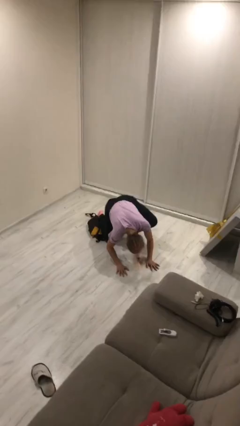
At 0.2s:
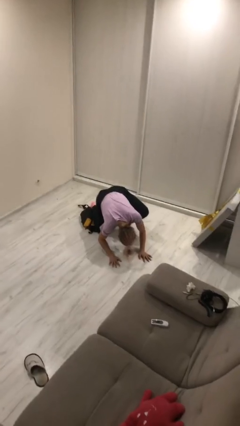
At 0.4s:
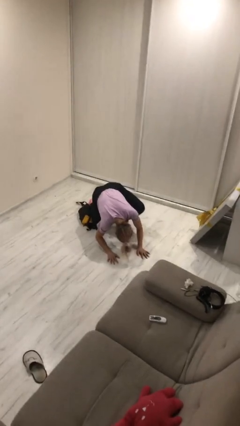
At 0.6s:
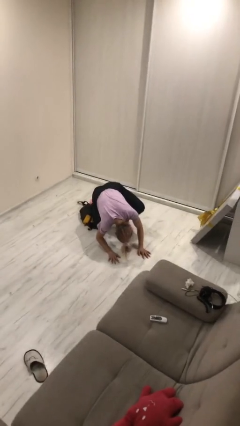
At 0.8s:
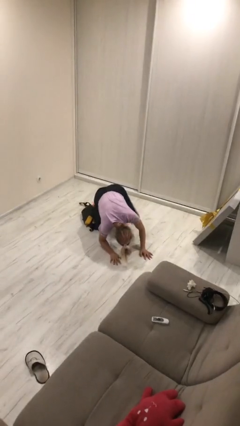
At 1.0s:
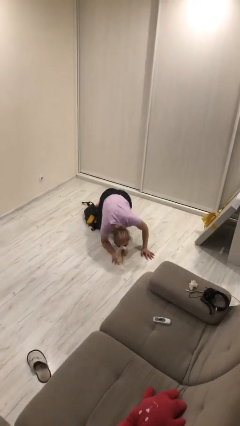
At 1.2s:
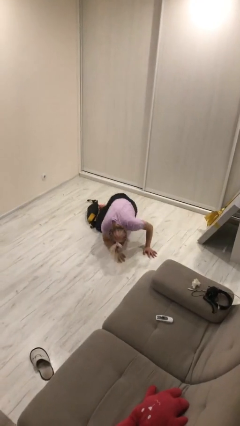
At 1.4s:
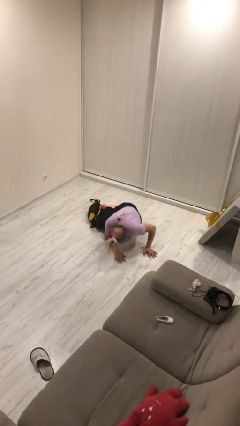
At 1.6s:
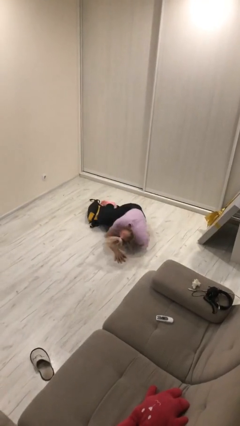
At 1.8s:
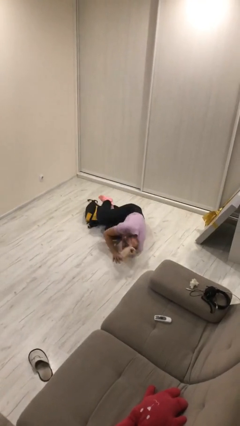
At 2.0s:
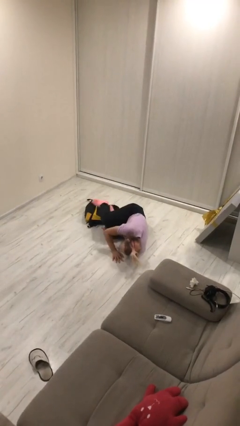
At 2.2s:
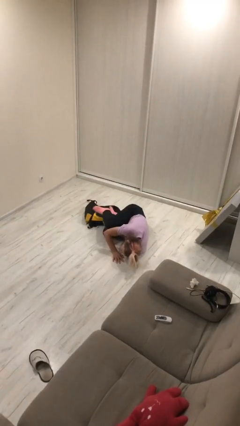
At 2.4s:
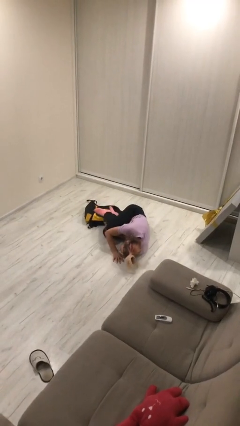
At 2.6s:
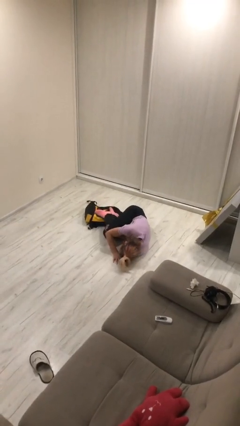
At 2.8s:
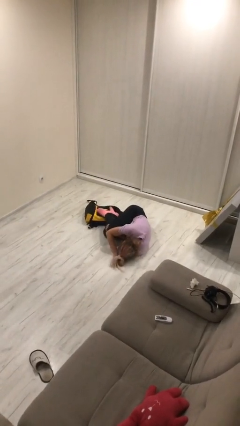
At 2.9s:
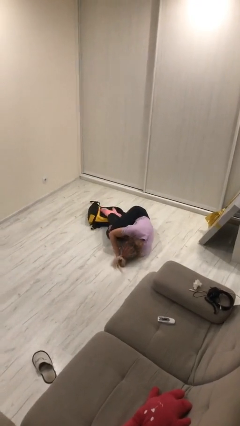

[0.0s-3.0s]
person lies down on floor

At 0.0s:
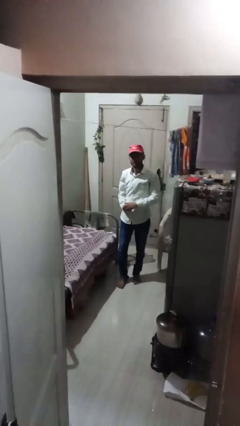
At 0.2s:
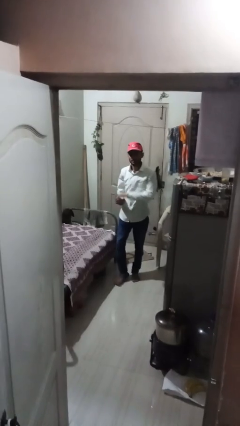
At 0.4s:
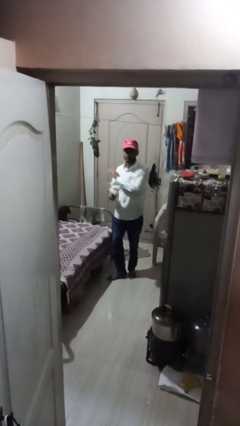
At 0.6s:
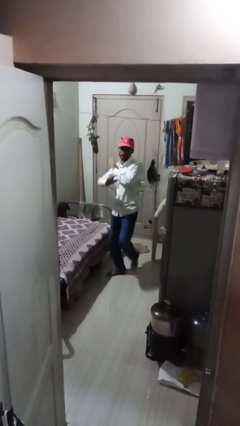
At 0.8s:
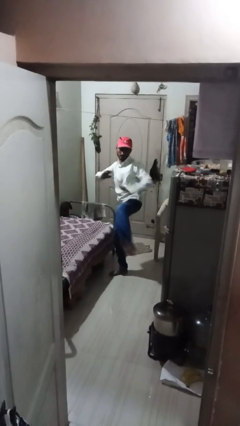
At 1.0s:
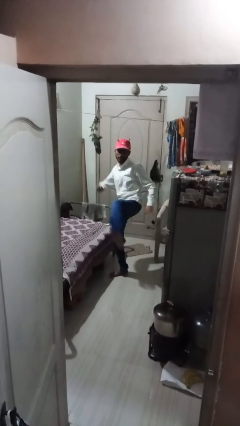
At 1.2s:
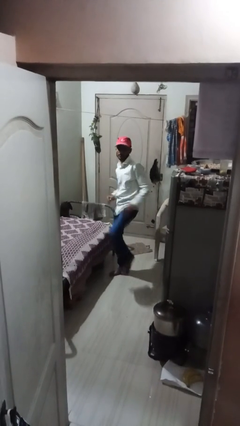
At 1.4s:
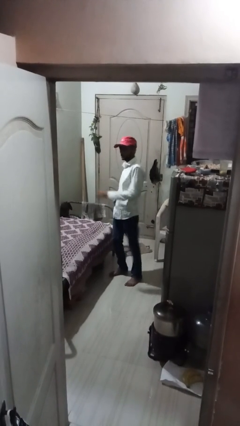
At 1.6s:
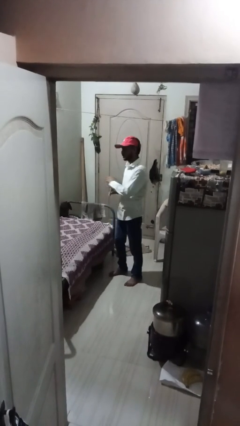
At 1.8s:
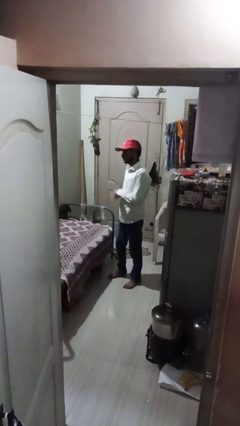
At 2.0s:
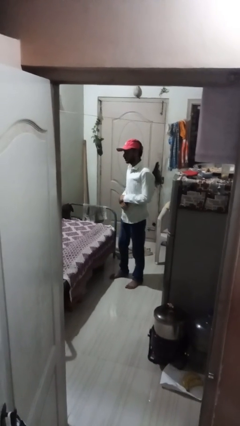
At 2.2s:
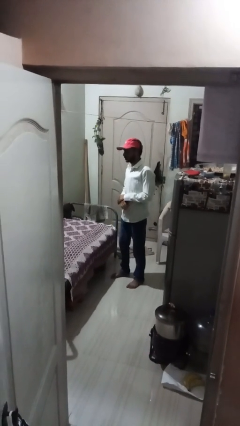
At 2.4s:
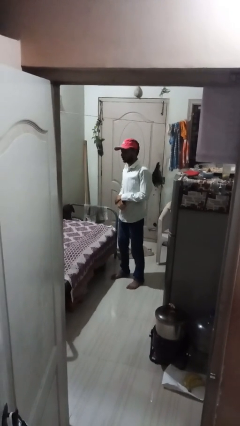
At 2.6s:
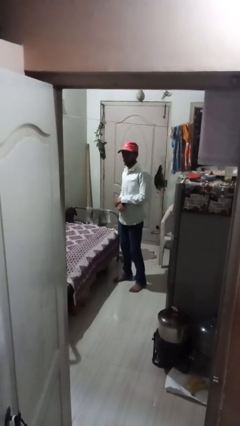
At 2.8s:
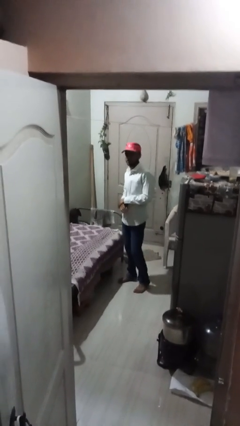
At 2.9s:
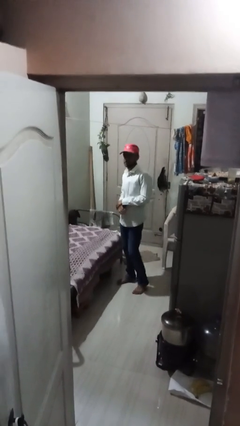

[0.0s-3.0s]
person karate kicks

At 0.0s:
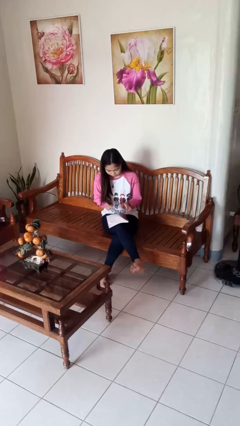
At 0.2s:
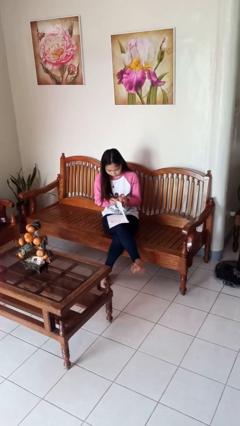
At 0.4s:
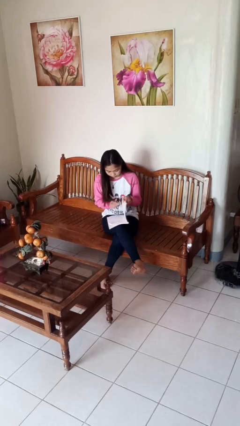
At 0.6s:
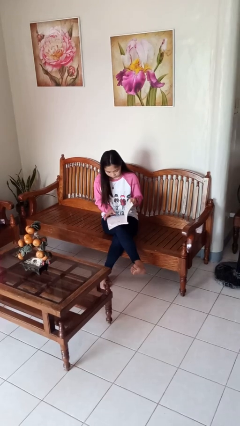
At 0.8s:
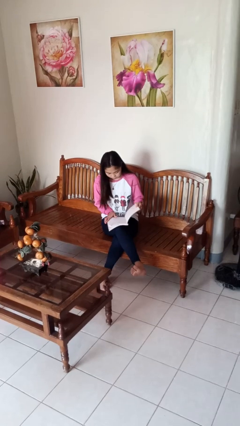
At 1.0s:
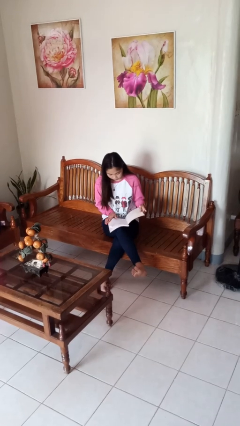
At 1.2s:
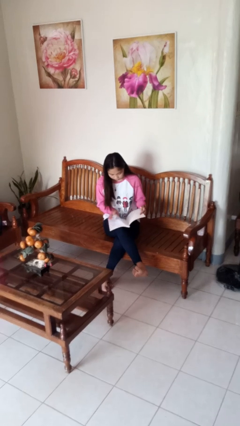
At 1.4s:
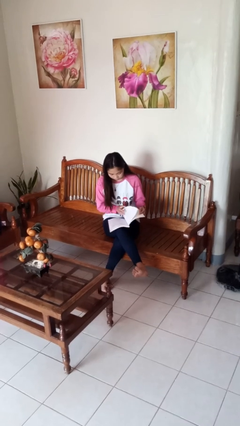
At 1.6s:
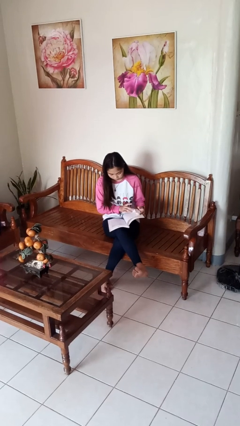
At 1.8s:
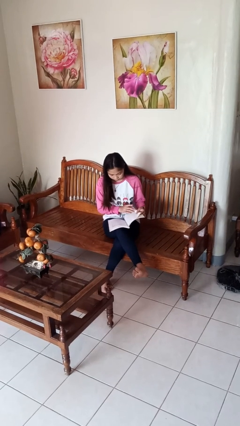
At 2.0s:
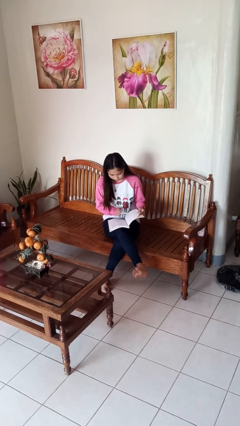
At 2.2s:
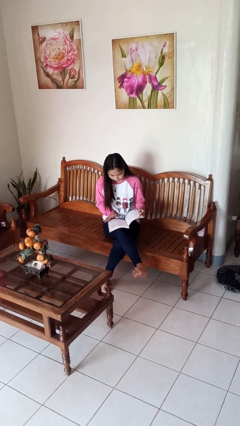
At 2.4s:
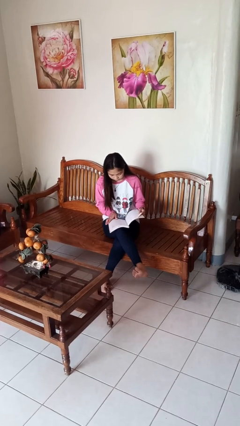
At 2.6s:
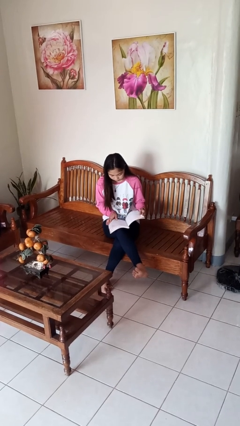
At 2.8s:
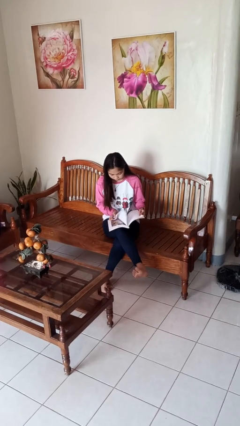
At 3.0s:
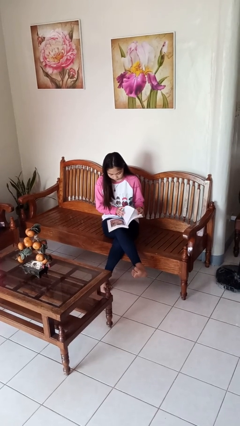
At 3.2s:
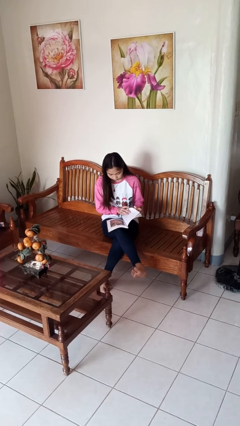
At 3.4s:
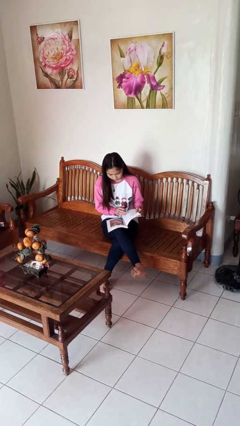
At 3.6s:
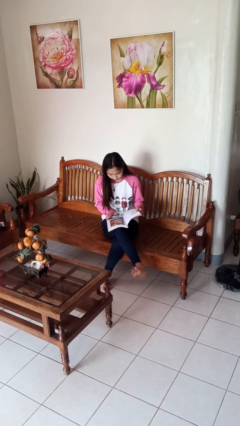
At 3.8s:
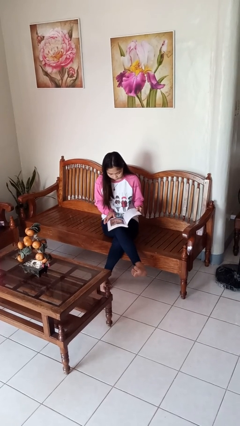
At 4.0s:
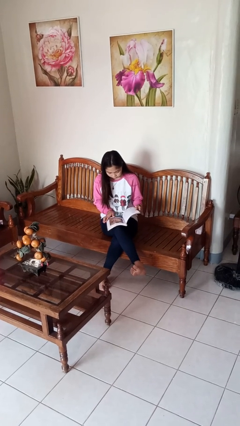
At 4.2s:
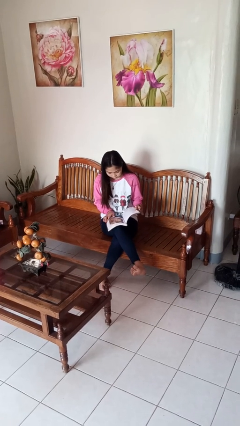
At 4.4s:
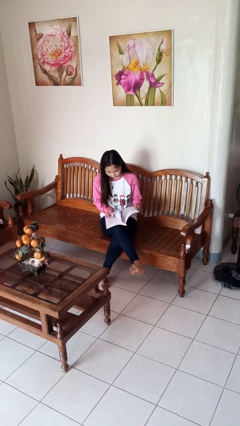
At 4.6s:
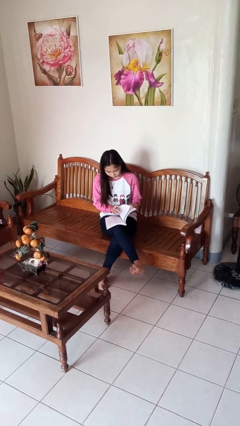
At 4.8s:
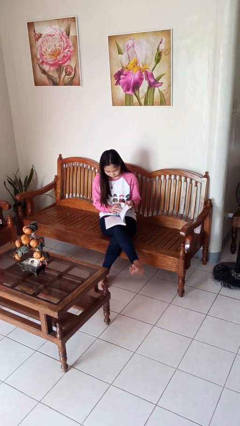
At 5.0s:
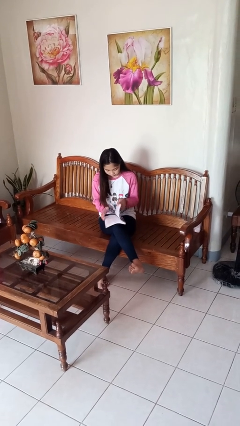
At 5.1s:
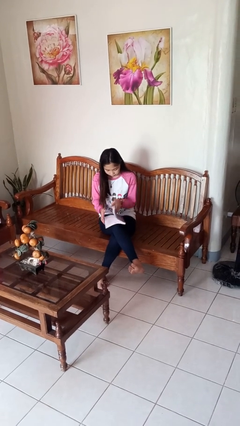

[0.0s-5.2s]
person reads book

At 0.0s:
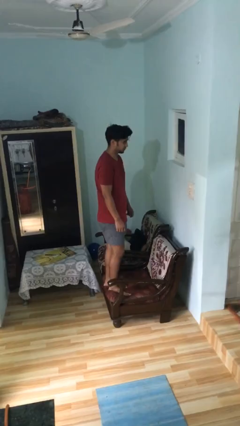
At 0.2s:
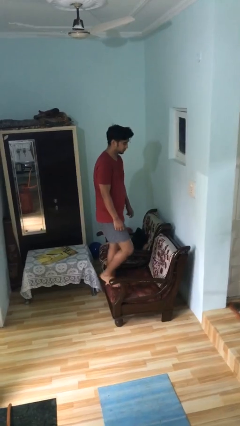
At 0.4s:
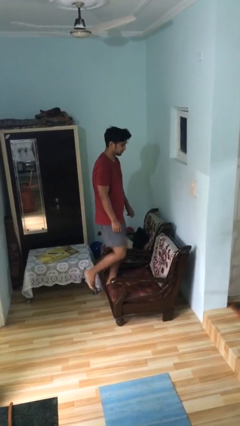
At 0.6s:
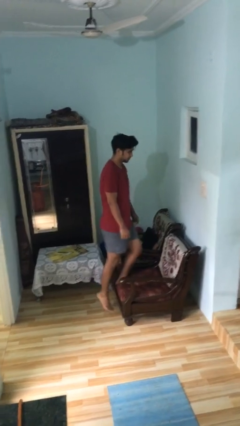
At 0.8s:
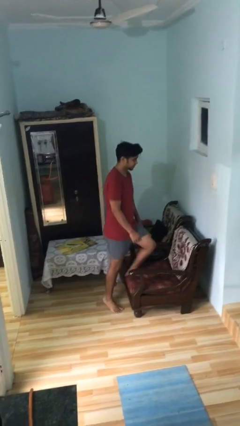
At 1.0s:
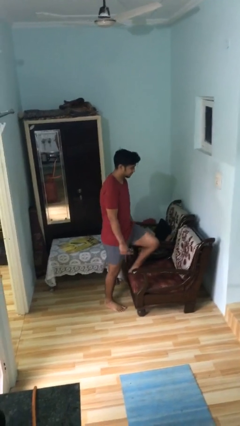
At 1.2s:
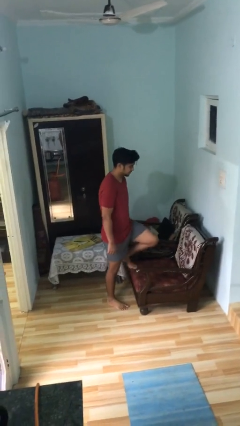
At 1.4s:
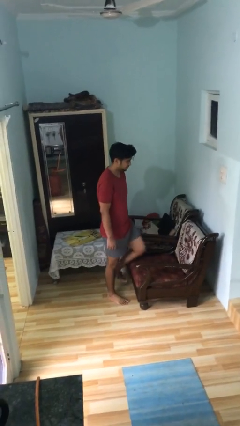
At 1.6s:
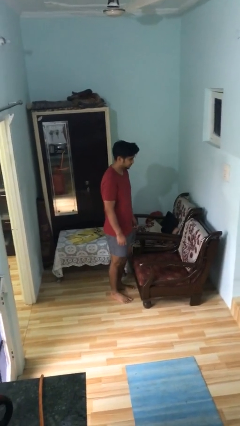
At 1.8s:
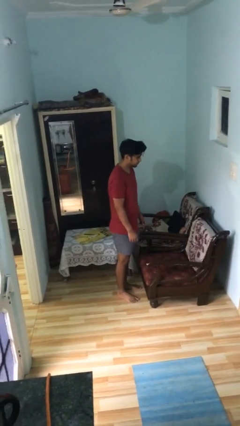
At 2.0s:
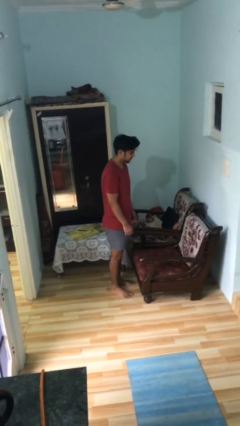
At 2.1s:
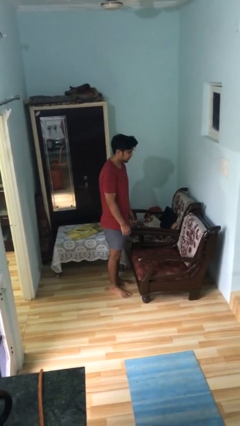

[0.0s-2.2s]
person climbs off couch

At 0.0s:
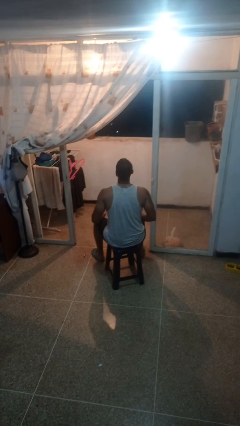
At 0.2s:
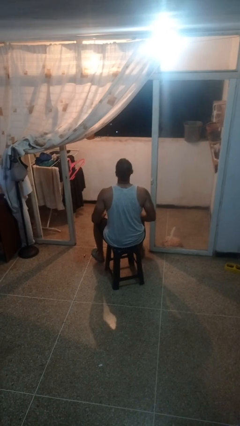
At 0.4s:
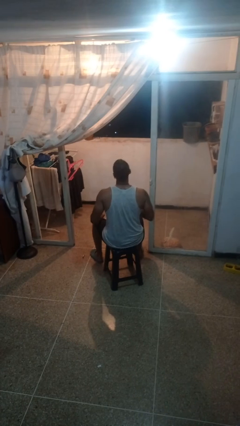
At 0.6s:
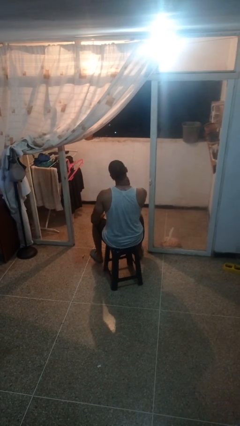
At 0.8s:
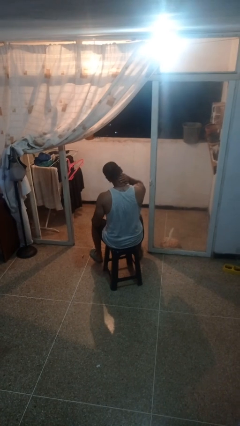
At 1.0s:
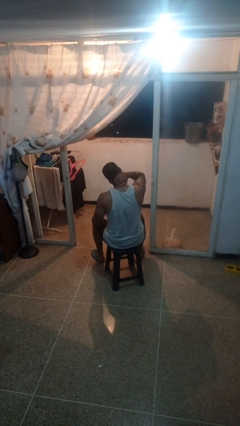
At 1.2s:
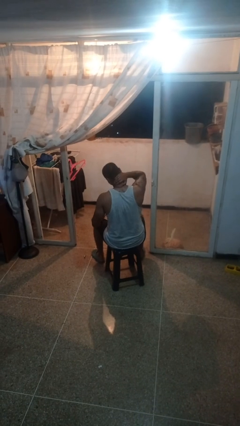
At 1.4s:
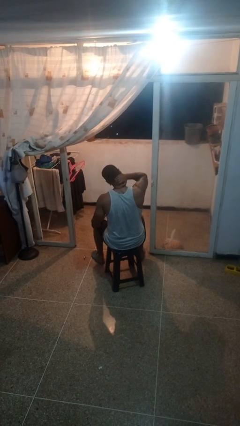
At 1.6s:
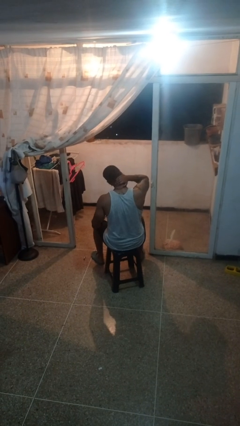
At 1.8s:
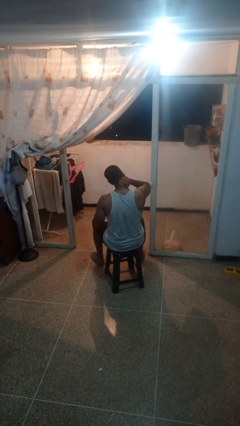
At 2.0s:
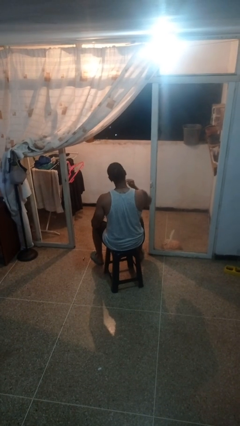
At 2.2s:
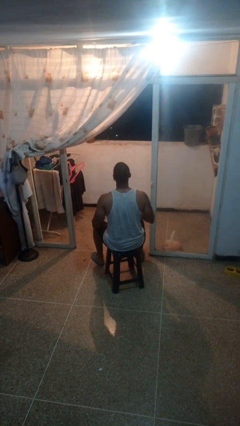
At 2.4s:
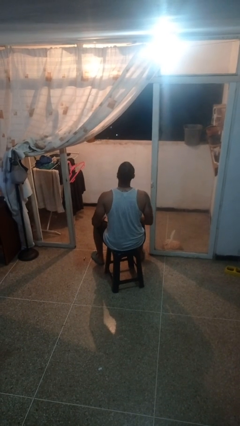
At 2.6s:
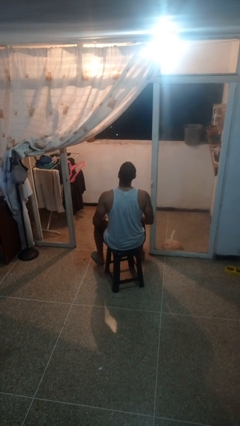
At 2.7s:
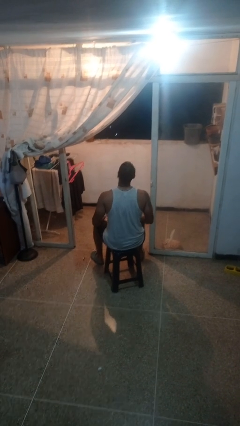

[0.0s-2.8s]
person rubs neck

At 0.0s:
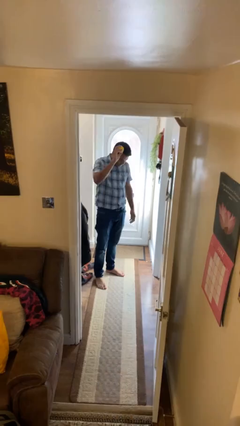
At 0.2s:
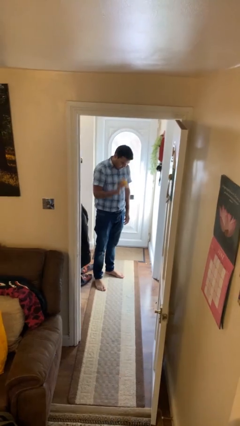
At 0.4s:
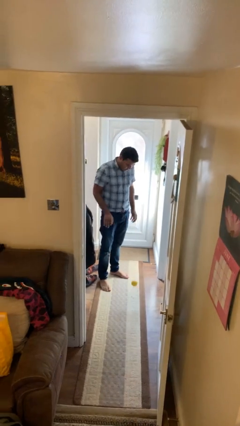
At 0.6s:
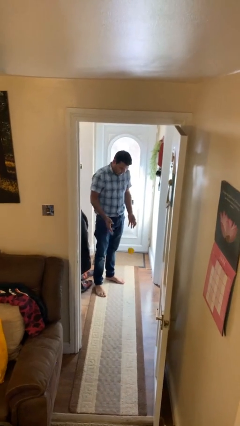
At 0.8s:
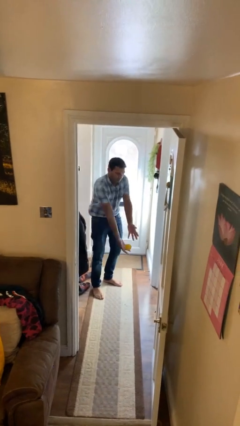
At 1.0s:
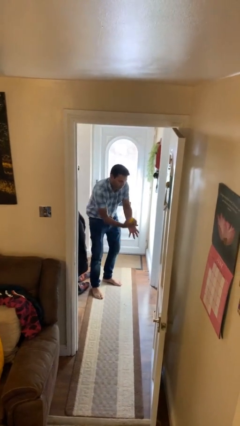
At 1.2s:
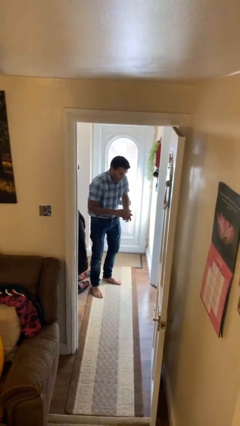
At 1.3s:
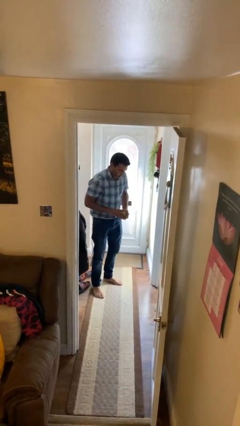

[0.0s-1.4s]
person bounces ball on floor
